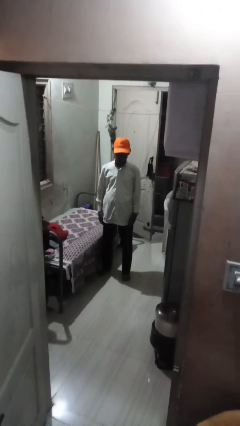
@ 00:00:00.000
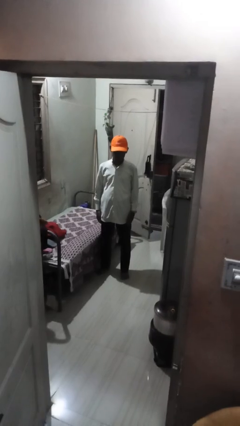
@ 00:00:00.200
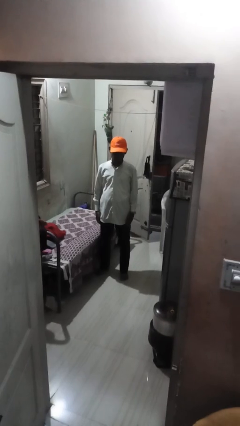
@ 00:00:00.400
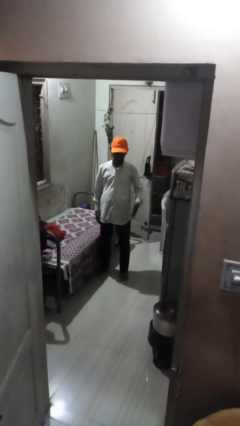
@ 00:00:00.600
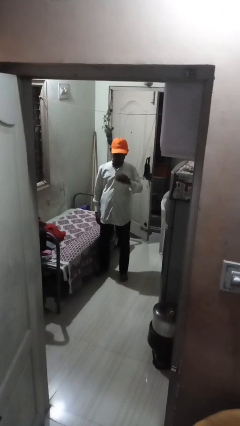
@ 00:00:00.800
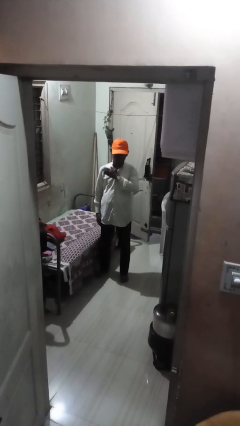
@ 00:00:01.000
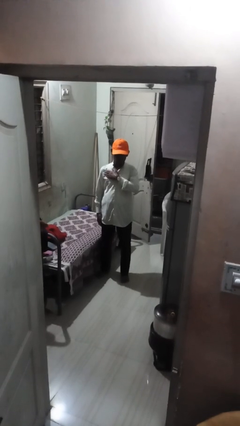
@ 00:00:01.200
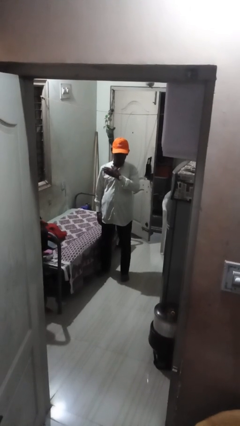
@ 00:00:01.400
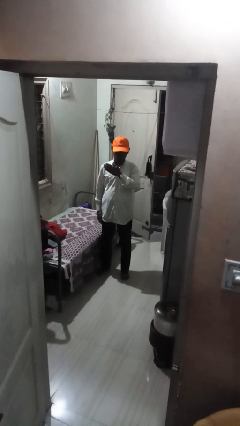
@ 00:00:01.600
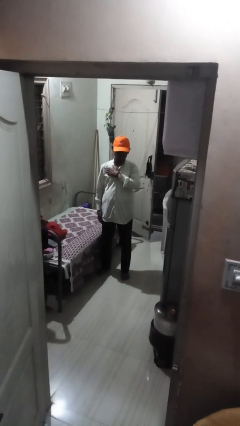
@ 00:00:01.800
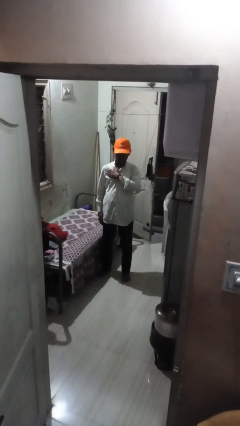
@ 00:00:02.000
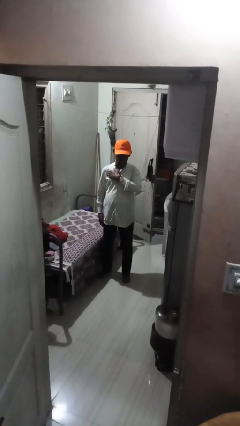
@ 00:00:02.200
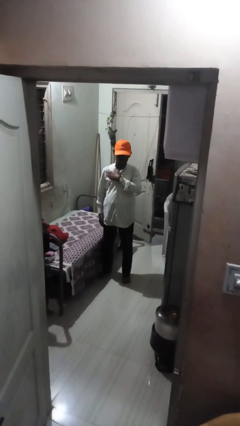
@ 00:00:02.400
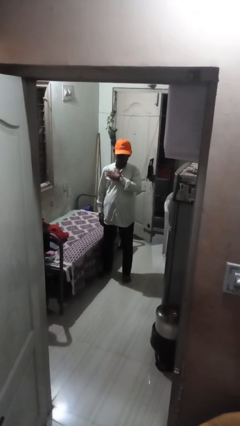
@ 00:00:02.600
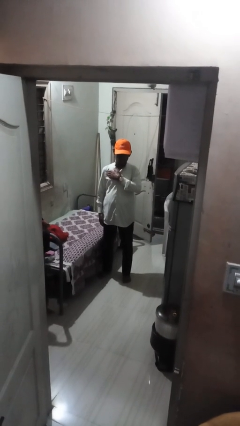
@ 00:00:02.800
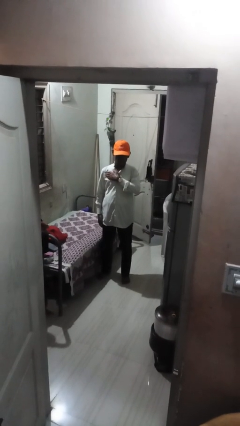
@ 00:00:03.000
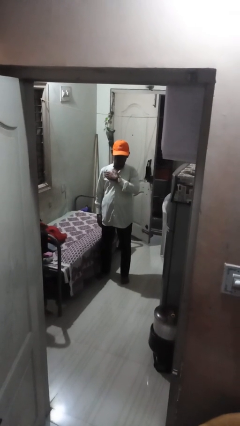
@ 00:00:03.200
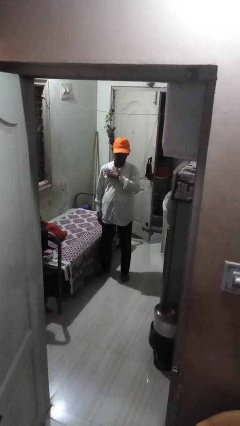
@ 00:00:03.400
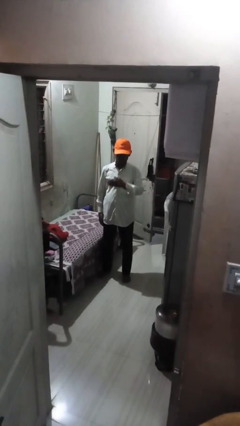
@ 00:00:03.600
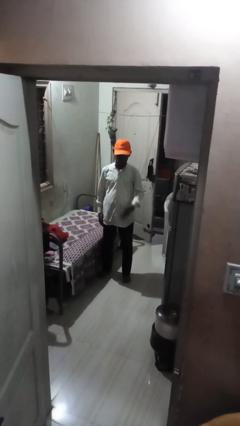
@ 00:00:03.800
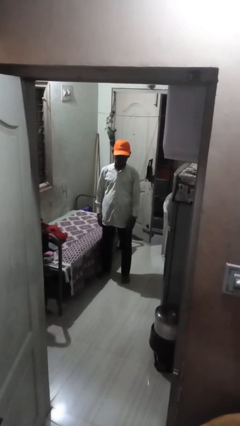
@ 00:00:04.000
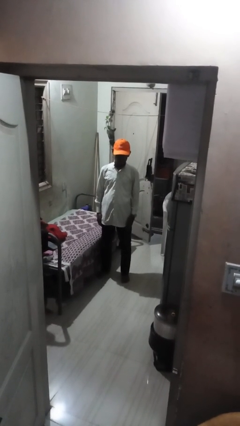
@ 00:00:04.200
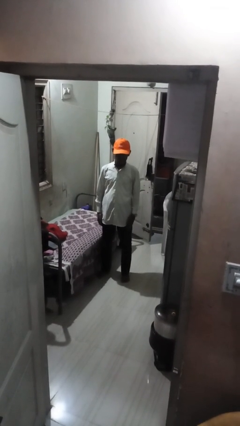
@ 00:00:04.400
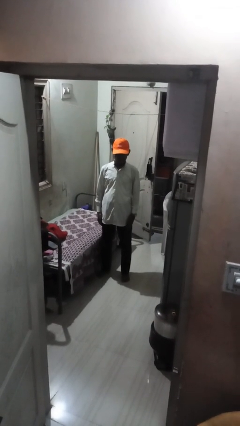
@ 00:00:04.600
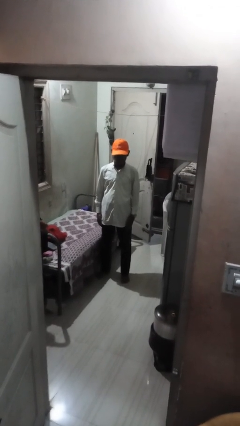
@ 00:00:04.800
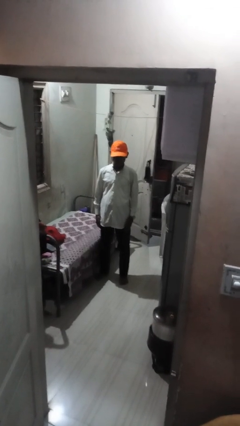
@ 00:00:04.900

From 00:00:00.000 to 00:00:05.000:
person drums on chest

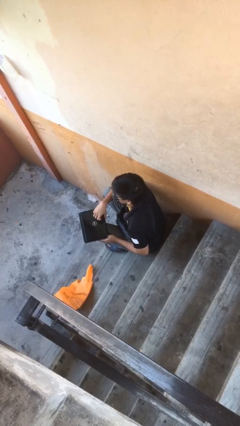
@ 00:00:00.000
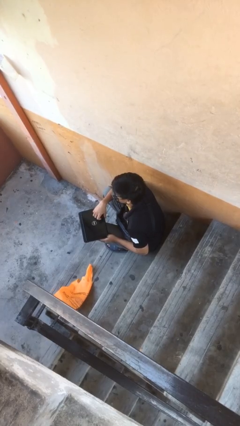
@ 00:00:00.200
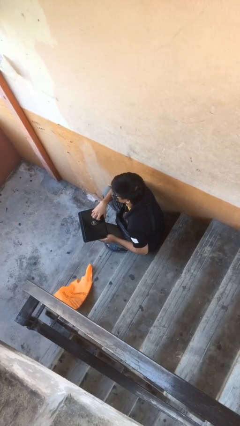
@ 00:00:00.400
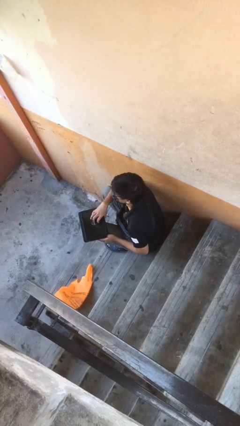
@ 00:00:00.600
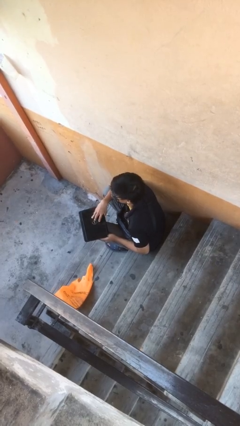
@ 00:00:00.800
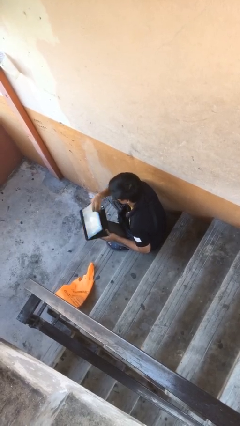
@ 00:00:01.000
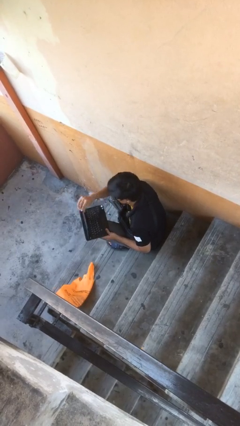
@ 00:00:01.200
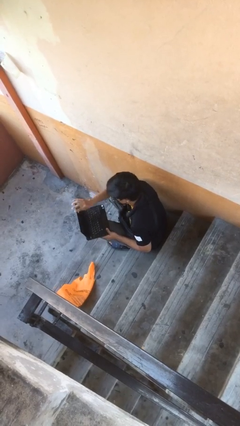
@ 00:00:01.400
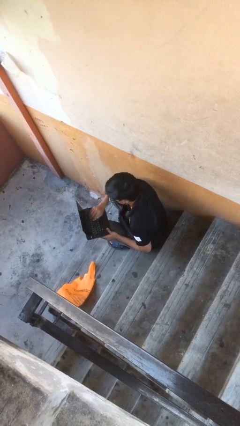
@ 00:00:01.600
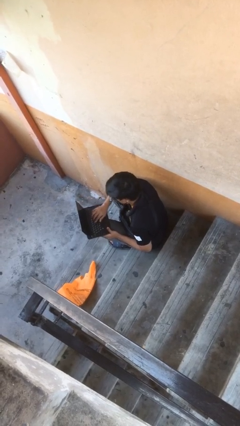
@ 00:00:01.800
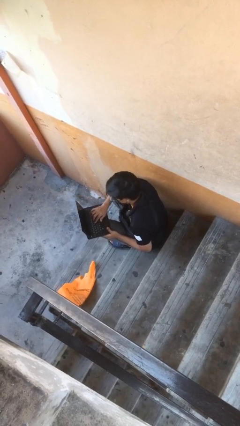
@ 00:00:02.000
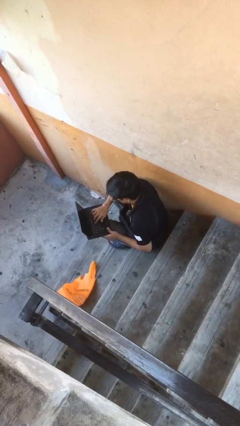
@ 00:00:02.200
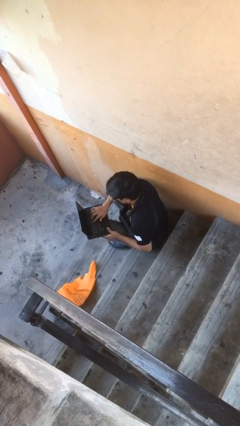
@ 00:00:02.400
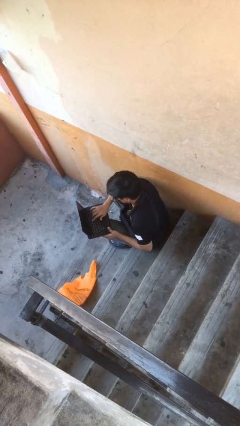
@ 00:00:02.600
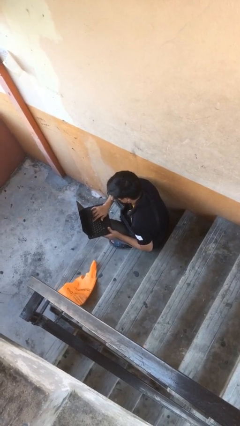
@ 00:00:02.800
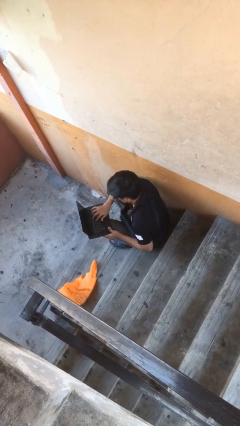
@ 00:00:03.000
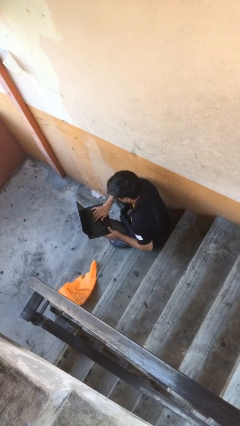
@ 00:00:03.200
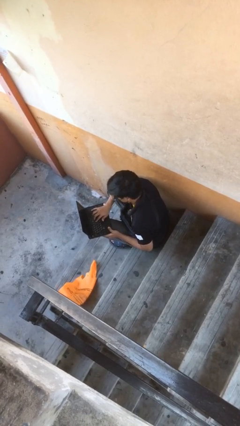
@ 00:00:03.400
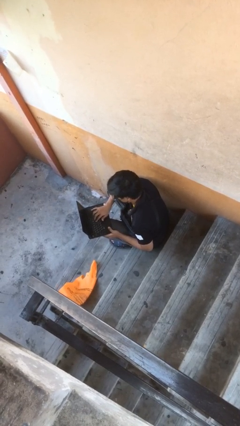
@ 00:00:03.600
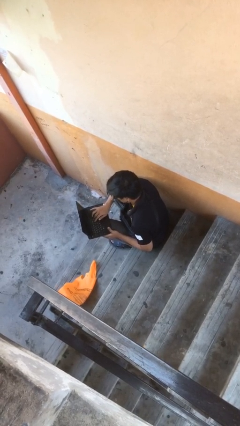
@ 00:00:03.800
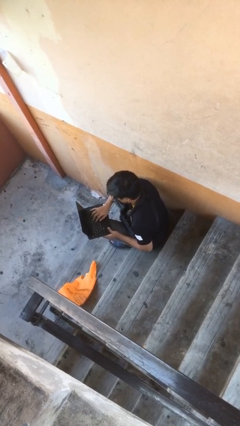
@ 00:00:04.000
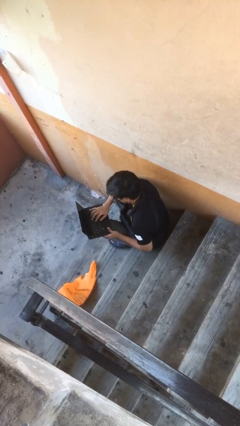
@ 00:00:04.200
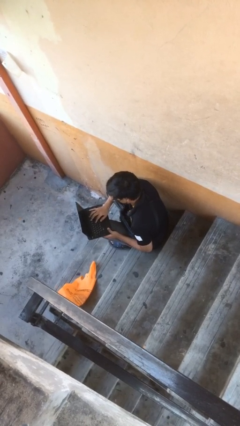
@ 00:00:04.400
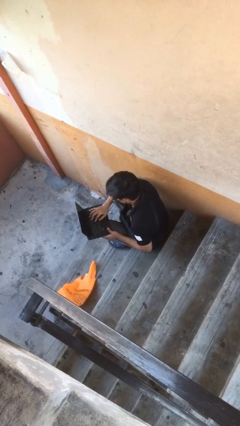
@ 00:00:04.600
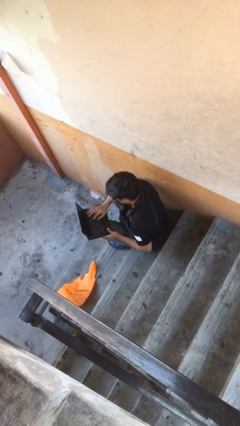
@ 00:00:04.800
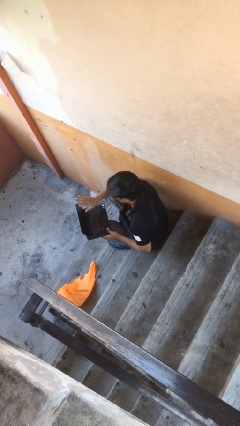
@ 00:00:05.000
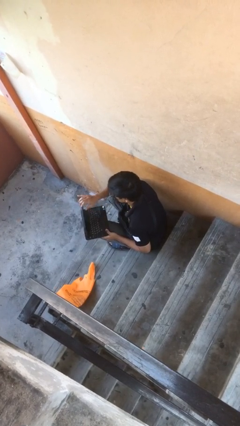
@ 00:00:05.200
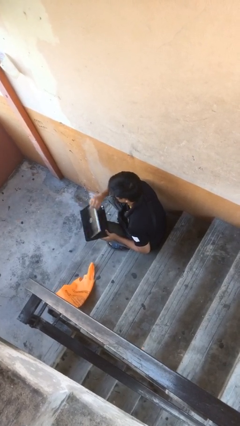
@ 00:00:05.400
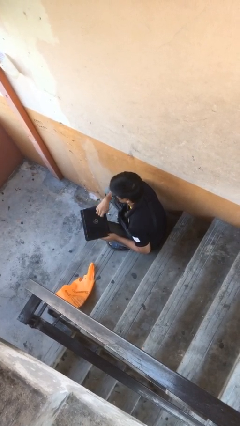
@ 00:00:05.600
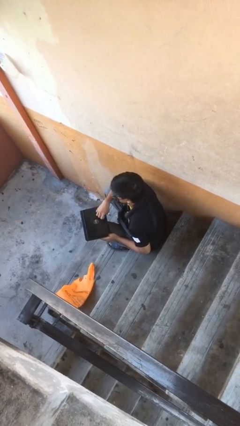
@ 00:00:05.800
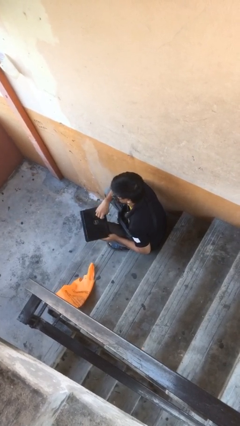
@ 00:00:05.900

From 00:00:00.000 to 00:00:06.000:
person interacts with laptop

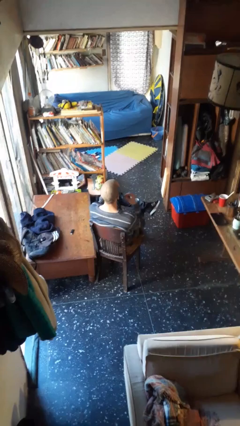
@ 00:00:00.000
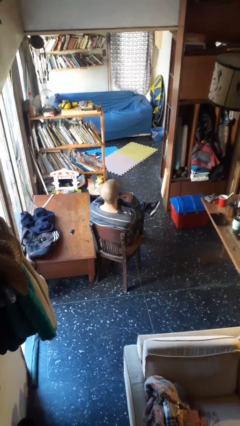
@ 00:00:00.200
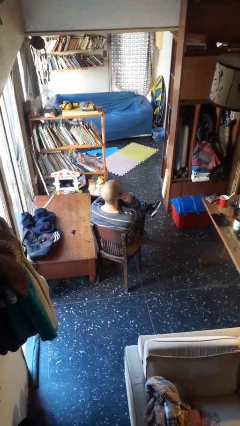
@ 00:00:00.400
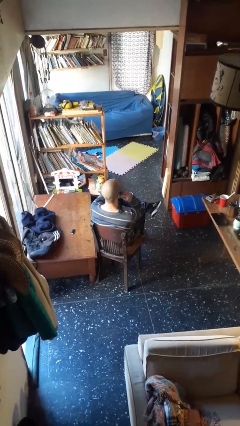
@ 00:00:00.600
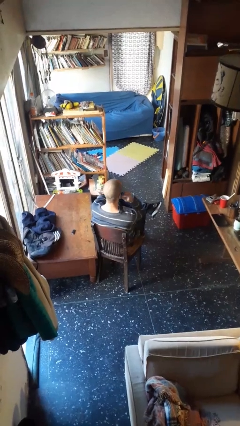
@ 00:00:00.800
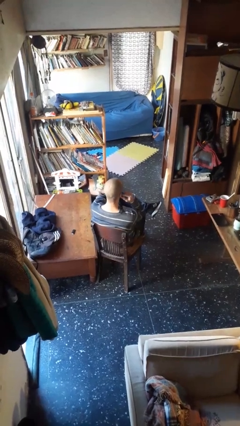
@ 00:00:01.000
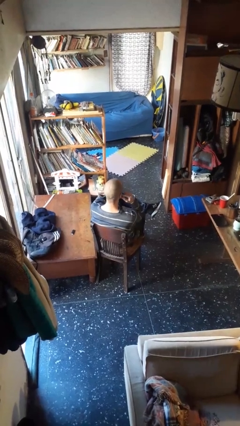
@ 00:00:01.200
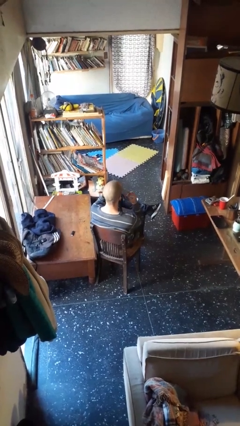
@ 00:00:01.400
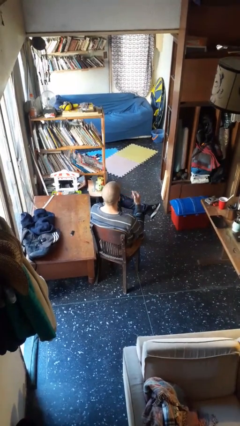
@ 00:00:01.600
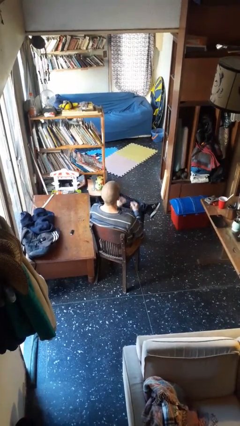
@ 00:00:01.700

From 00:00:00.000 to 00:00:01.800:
person puts on headphones

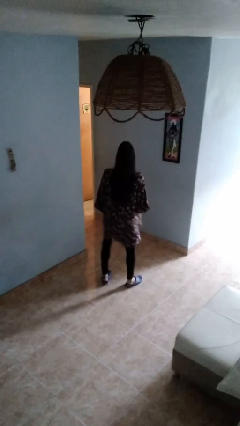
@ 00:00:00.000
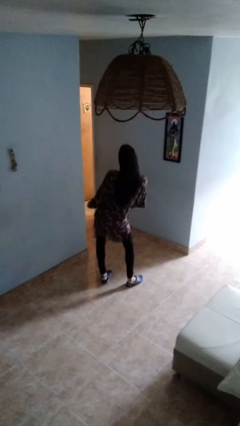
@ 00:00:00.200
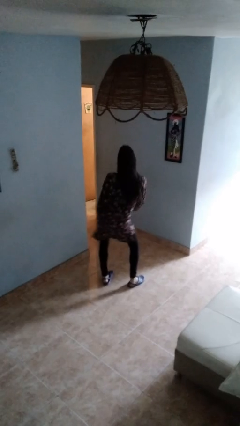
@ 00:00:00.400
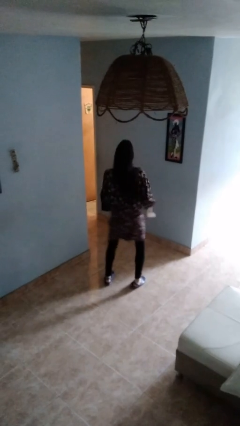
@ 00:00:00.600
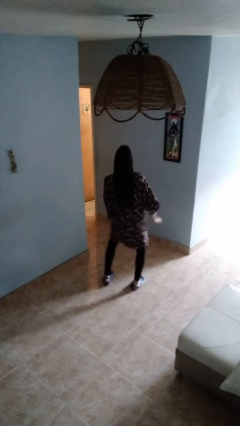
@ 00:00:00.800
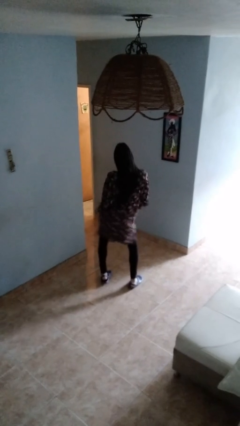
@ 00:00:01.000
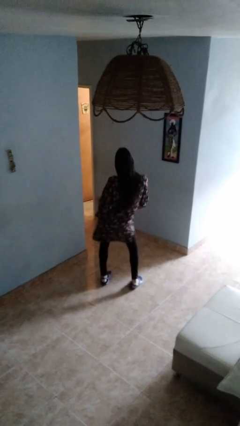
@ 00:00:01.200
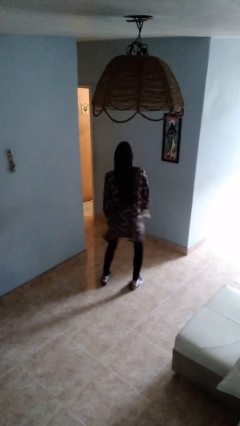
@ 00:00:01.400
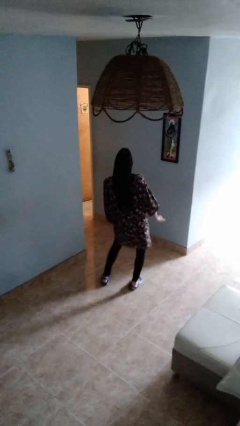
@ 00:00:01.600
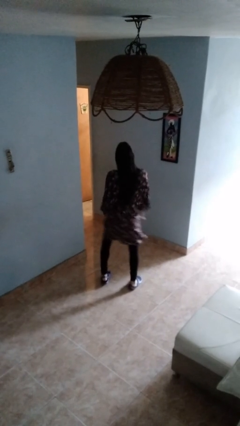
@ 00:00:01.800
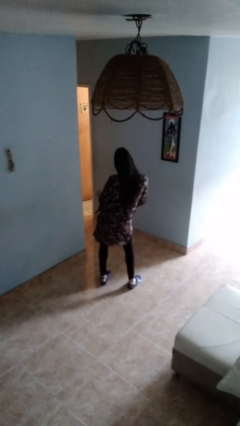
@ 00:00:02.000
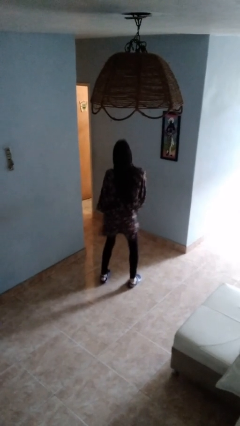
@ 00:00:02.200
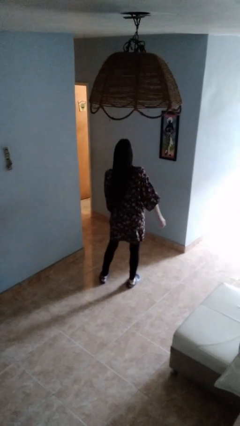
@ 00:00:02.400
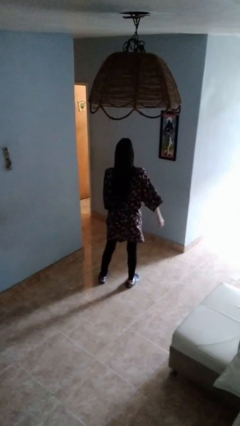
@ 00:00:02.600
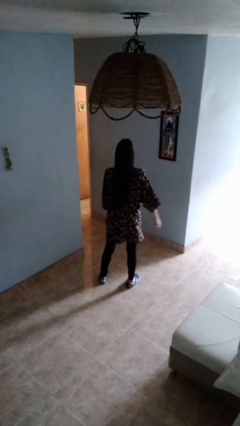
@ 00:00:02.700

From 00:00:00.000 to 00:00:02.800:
person dances in place

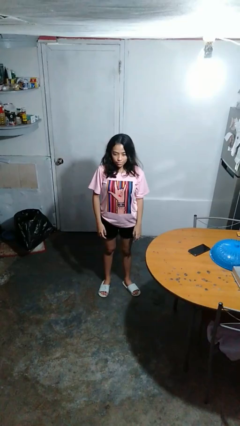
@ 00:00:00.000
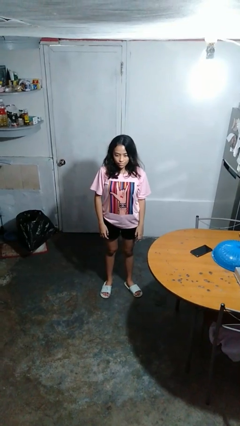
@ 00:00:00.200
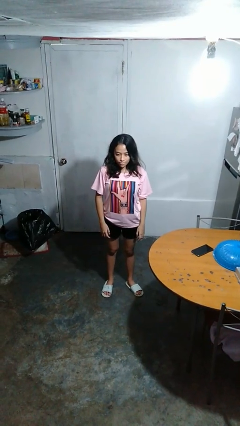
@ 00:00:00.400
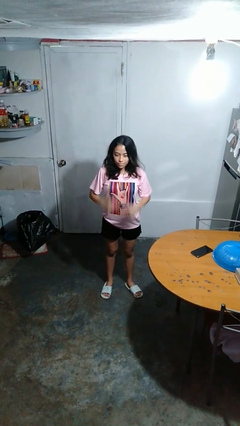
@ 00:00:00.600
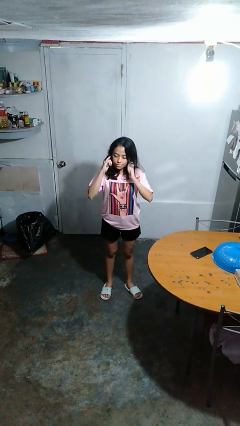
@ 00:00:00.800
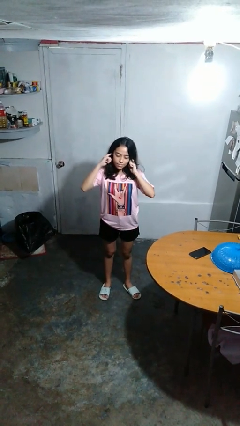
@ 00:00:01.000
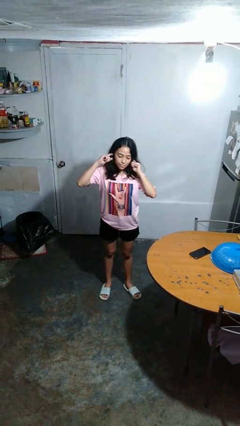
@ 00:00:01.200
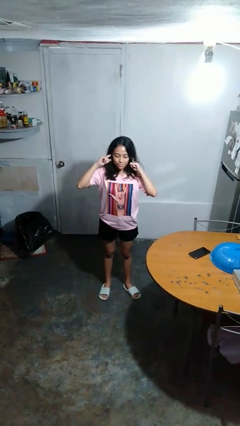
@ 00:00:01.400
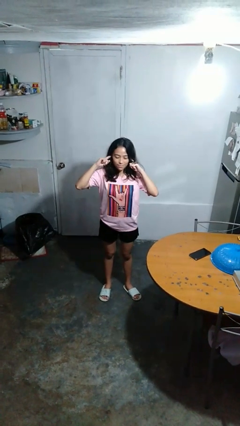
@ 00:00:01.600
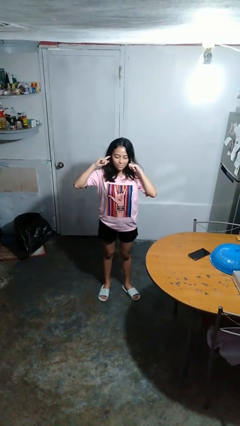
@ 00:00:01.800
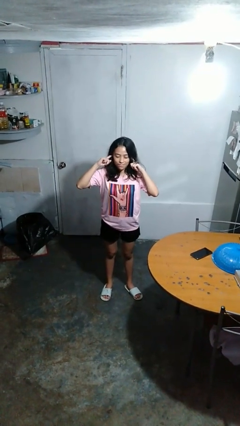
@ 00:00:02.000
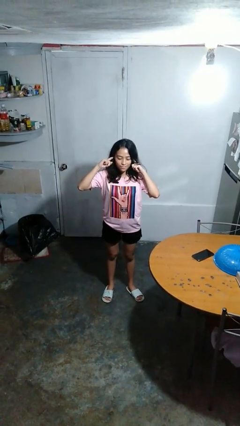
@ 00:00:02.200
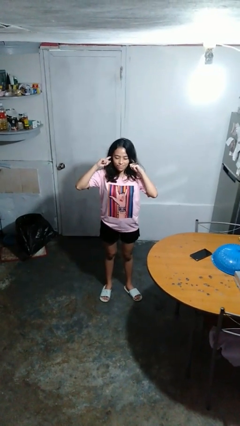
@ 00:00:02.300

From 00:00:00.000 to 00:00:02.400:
person puts fingers in ear
